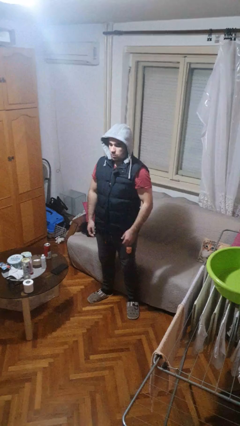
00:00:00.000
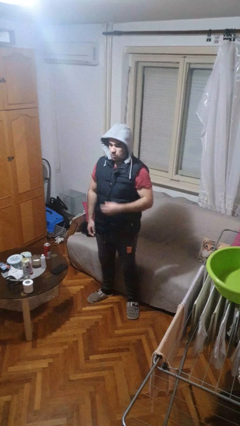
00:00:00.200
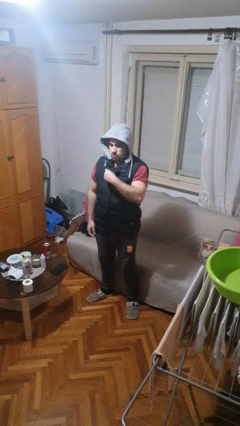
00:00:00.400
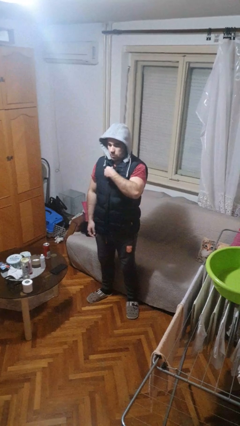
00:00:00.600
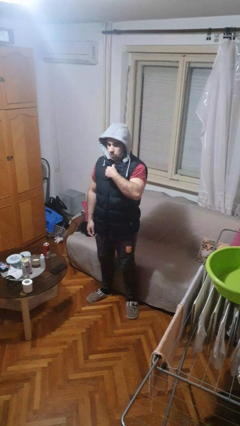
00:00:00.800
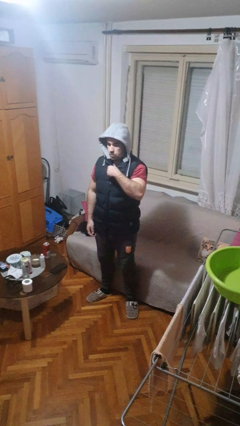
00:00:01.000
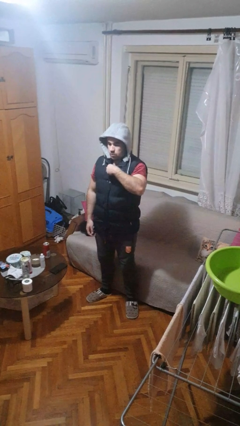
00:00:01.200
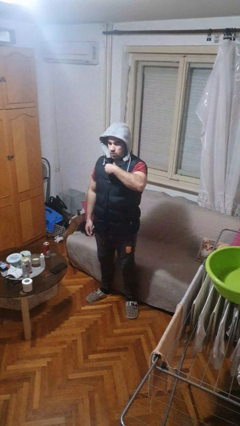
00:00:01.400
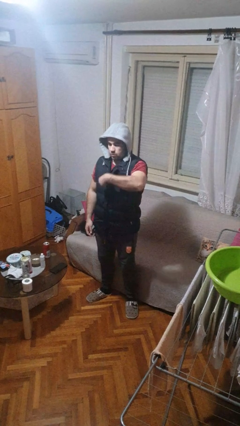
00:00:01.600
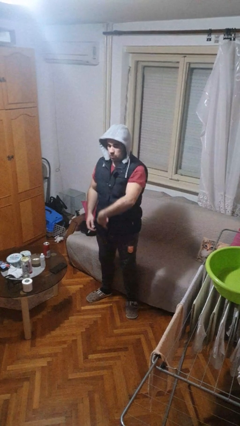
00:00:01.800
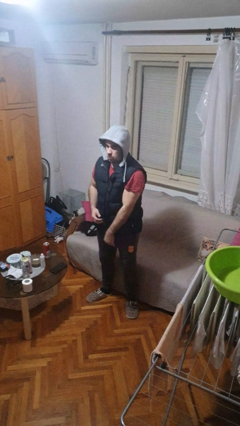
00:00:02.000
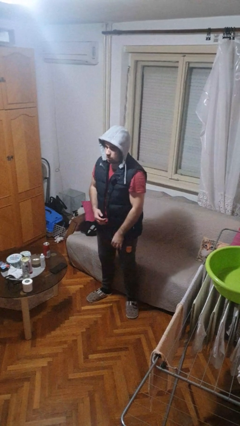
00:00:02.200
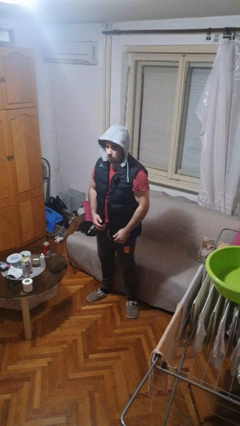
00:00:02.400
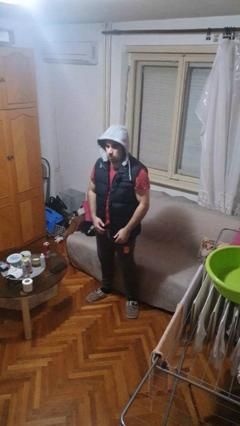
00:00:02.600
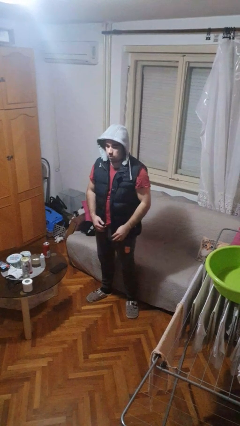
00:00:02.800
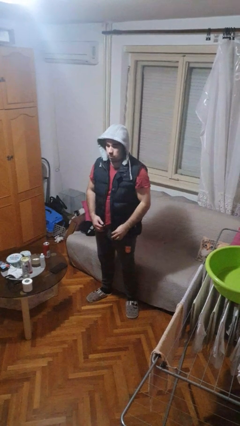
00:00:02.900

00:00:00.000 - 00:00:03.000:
person unzips jacket

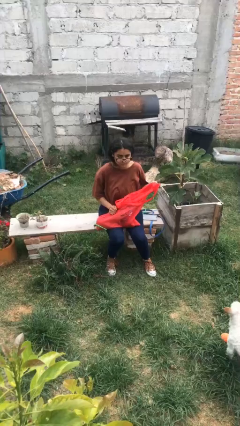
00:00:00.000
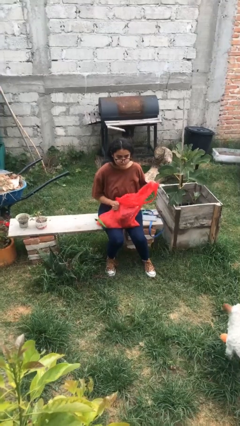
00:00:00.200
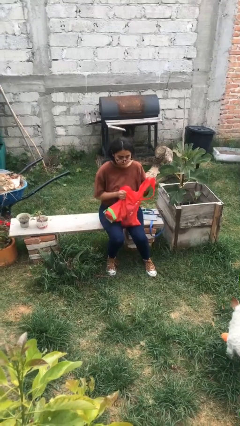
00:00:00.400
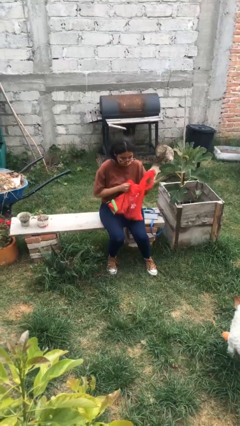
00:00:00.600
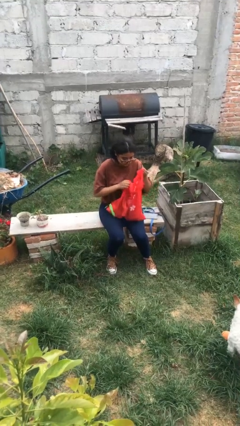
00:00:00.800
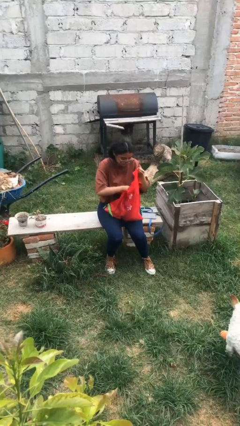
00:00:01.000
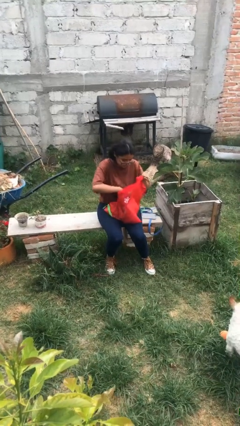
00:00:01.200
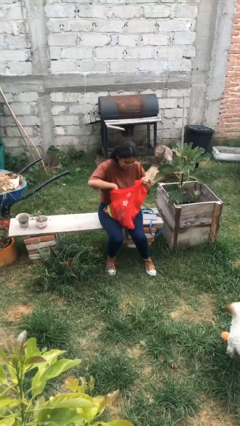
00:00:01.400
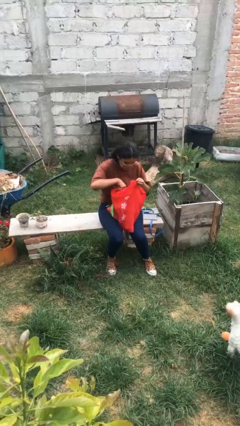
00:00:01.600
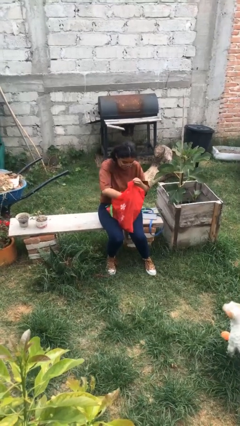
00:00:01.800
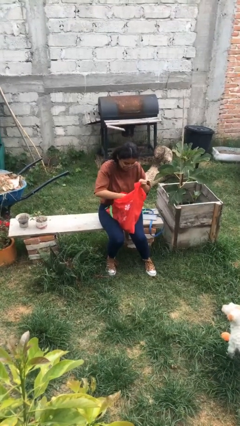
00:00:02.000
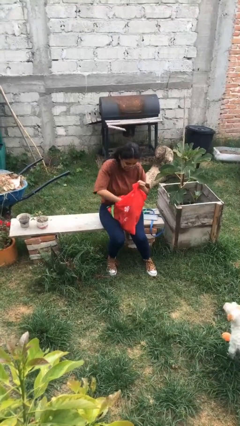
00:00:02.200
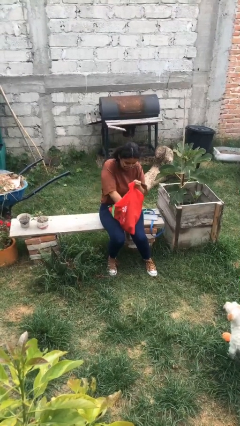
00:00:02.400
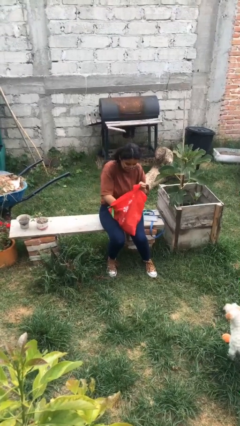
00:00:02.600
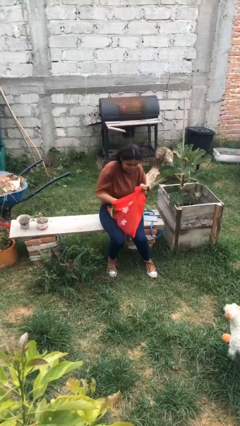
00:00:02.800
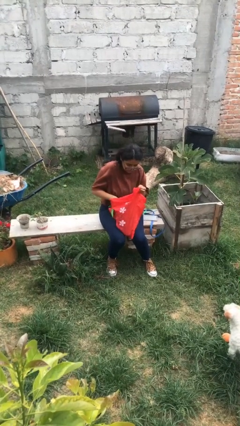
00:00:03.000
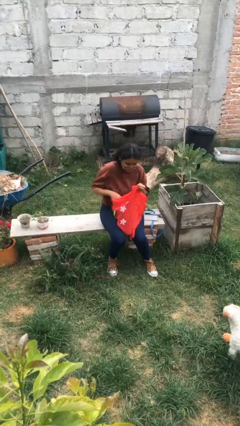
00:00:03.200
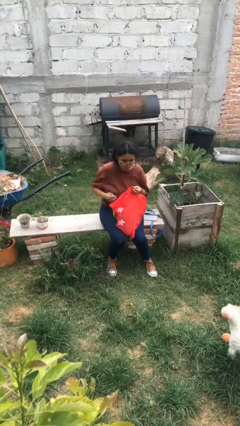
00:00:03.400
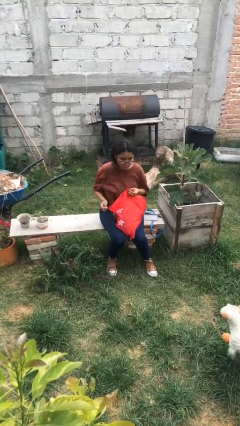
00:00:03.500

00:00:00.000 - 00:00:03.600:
person searches in bag

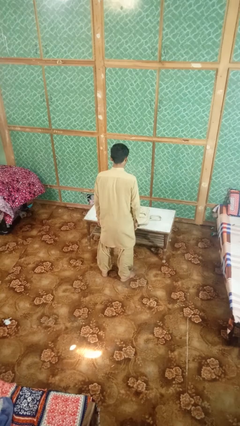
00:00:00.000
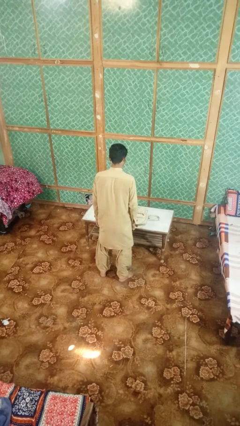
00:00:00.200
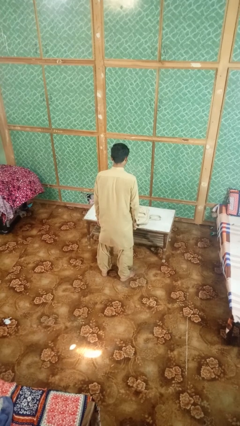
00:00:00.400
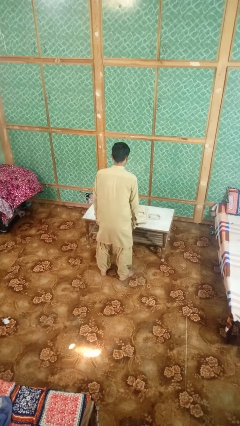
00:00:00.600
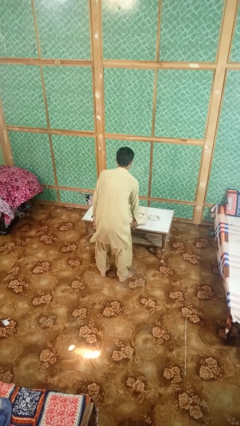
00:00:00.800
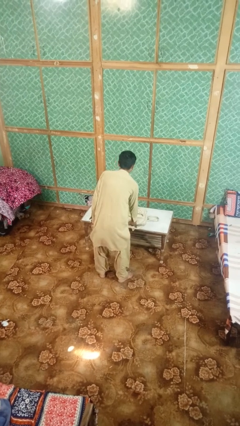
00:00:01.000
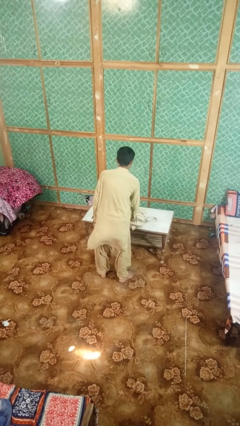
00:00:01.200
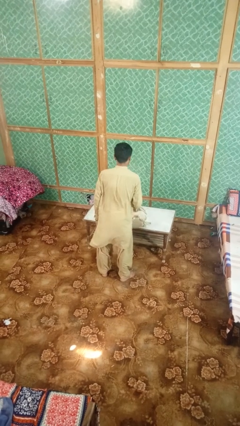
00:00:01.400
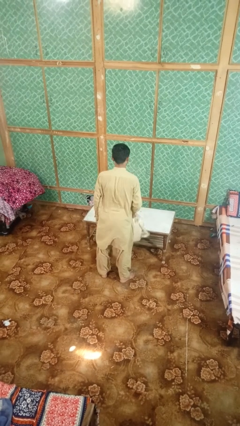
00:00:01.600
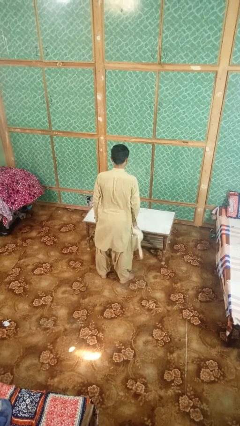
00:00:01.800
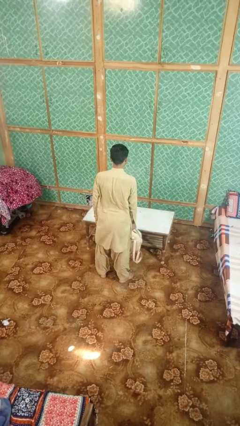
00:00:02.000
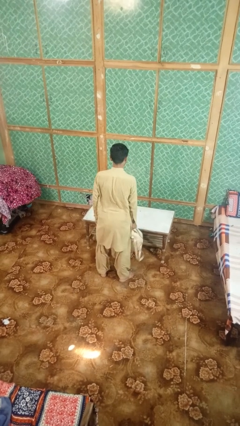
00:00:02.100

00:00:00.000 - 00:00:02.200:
person picks up object from table

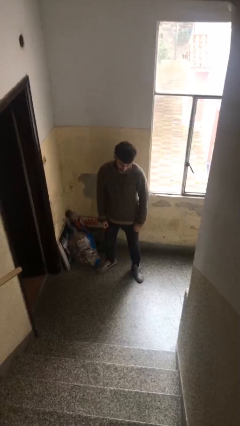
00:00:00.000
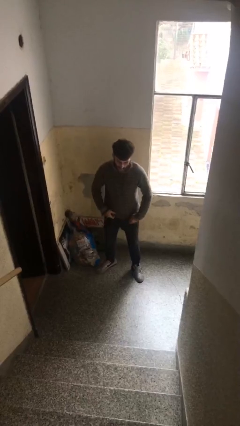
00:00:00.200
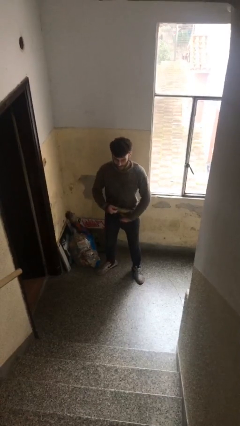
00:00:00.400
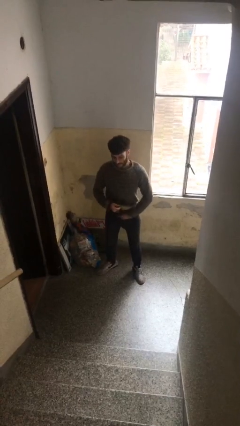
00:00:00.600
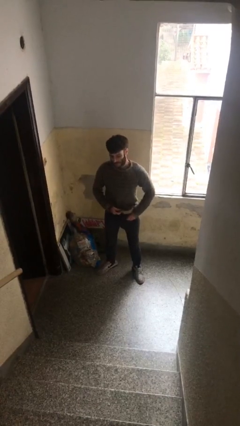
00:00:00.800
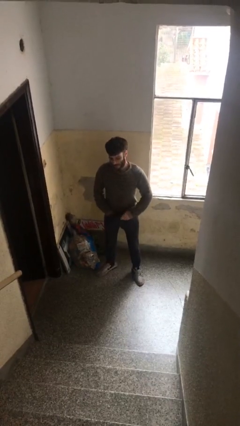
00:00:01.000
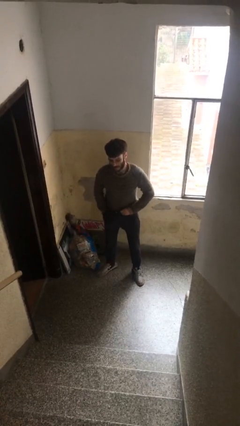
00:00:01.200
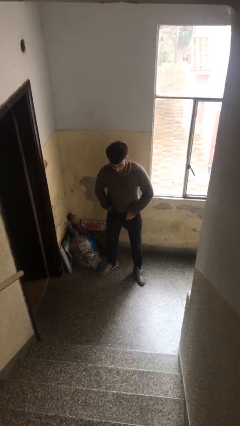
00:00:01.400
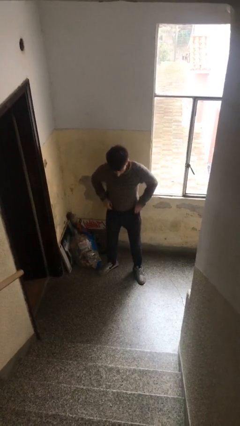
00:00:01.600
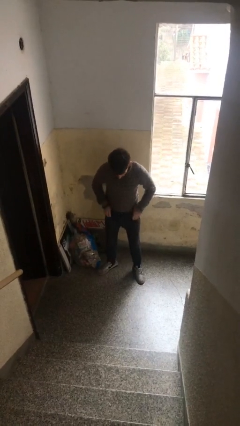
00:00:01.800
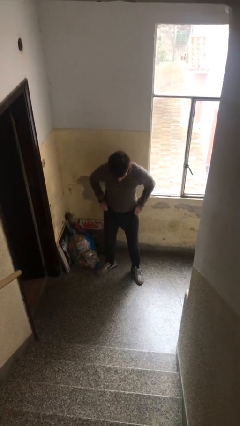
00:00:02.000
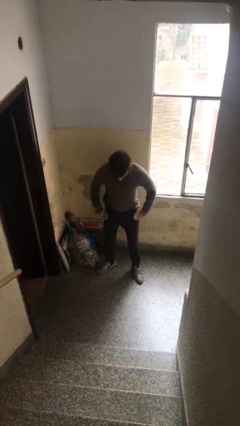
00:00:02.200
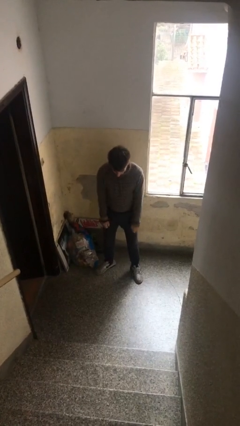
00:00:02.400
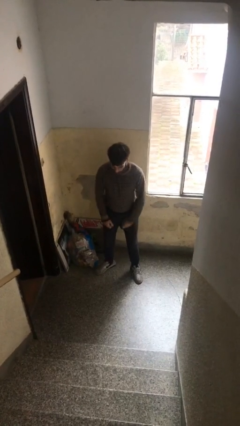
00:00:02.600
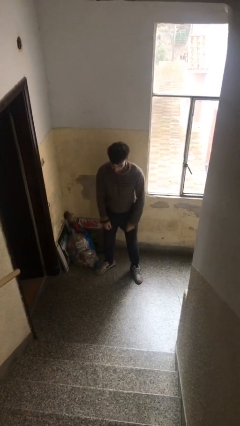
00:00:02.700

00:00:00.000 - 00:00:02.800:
person tucks in shirt

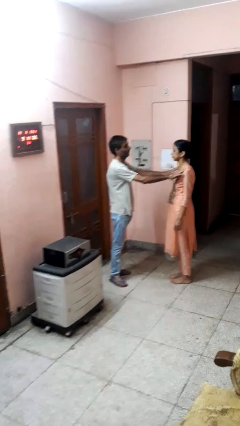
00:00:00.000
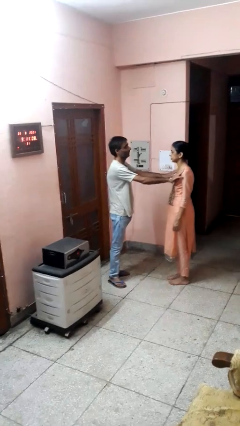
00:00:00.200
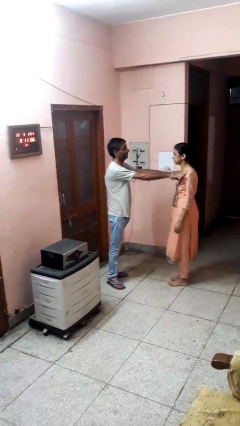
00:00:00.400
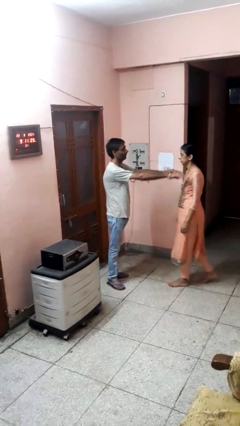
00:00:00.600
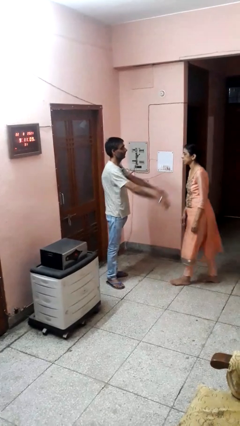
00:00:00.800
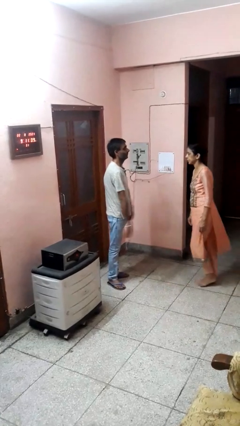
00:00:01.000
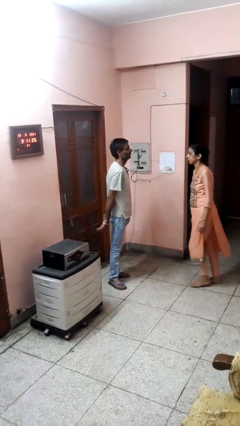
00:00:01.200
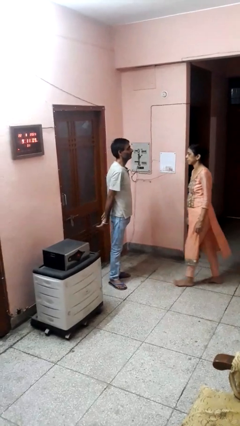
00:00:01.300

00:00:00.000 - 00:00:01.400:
person shoves person

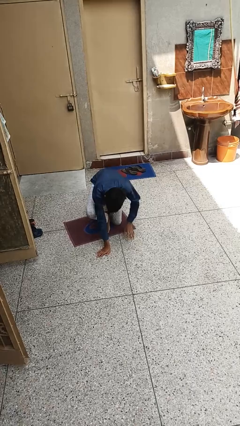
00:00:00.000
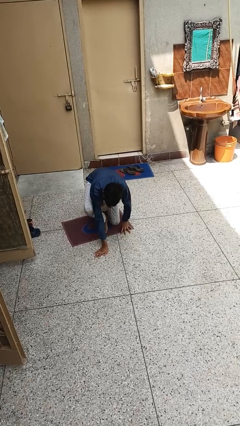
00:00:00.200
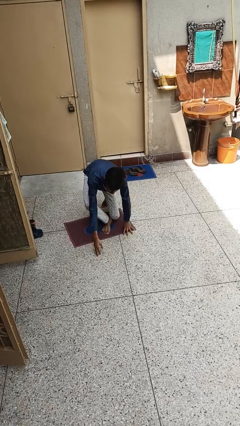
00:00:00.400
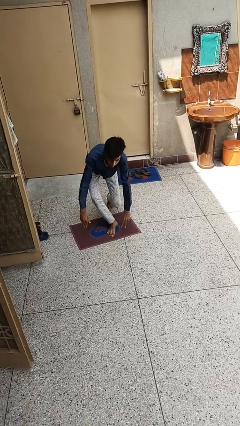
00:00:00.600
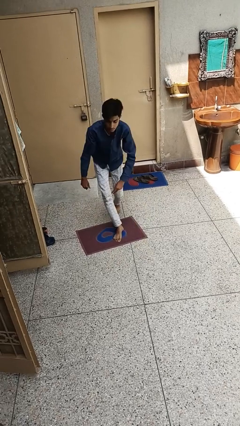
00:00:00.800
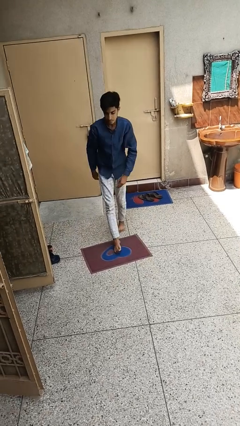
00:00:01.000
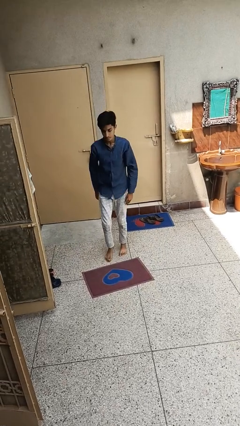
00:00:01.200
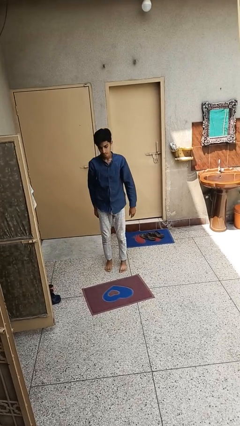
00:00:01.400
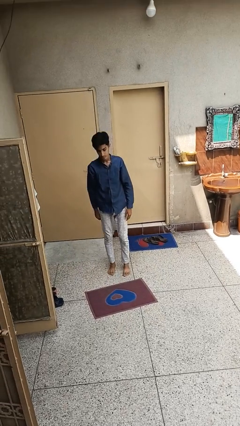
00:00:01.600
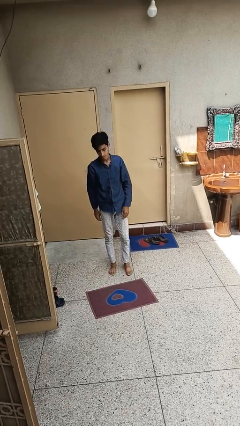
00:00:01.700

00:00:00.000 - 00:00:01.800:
person stands up from floor

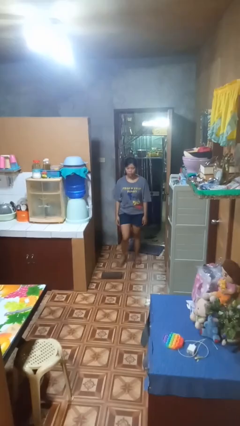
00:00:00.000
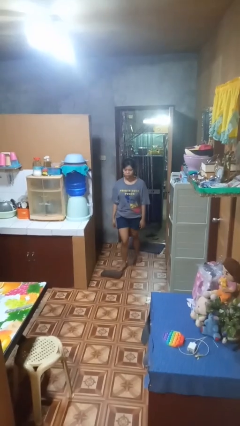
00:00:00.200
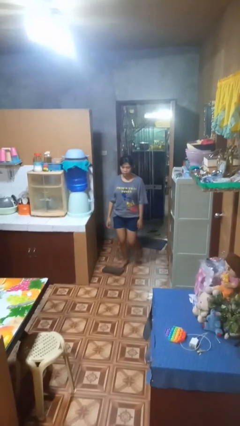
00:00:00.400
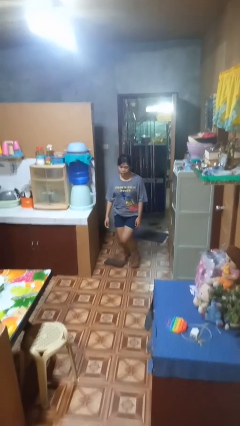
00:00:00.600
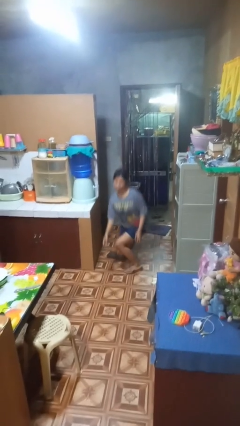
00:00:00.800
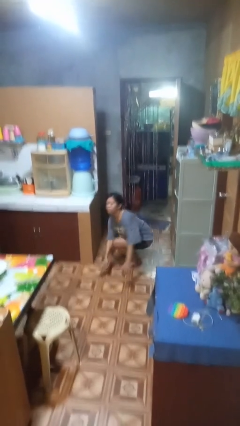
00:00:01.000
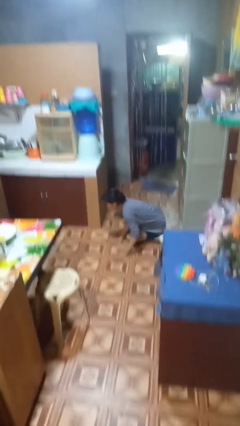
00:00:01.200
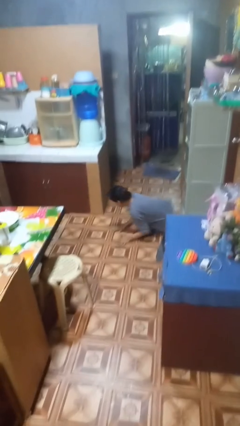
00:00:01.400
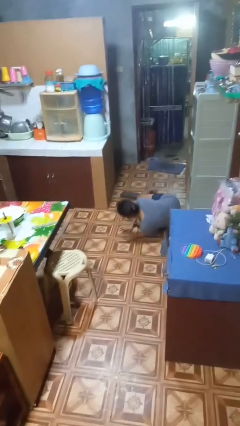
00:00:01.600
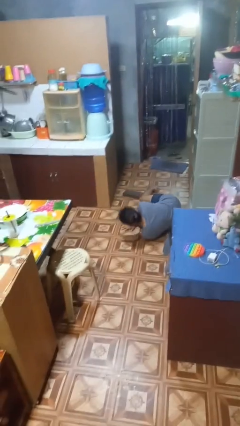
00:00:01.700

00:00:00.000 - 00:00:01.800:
person trips on object on floor

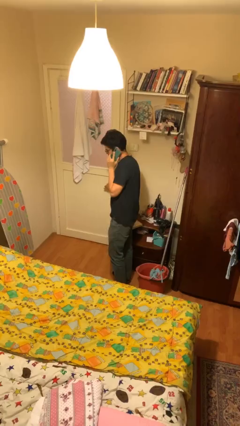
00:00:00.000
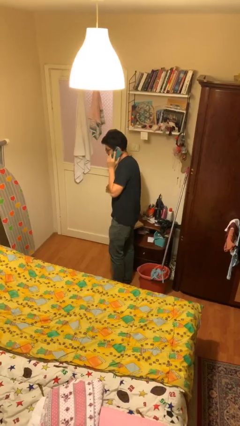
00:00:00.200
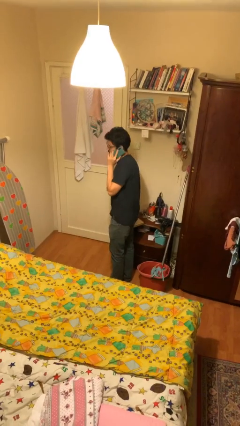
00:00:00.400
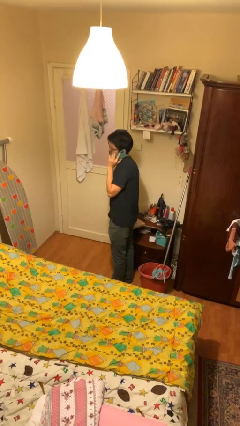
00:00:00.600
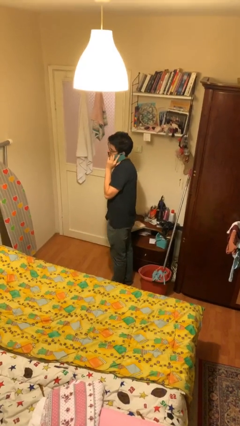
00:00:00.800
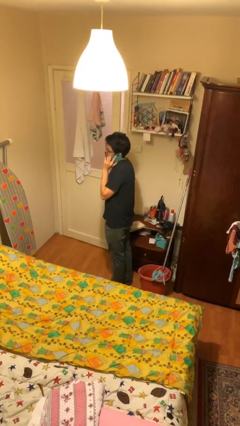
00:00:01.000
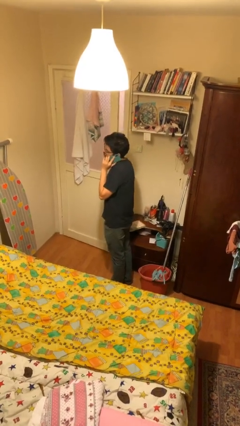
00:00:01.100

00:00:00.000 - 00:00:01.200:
person opens facility door
